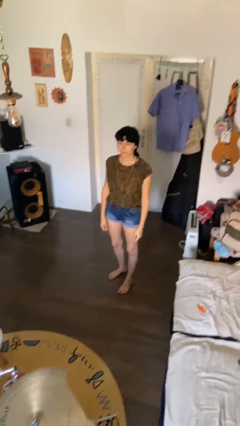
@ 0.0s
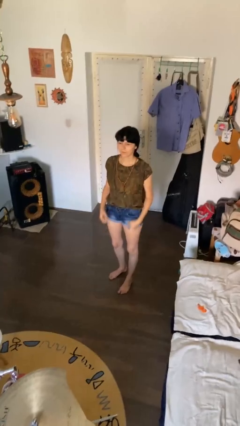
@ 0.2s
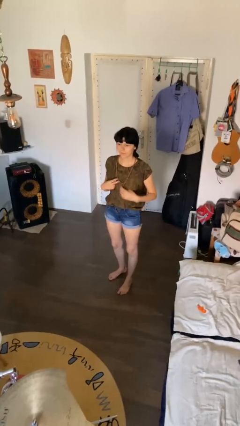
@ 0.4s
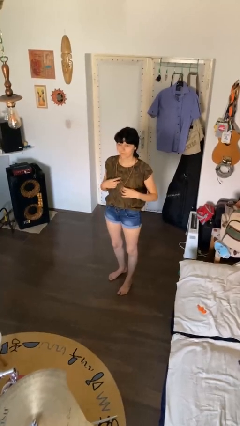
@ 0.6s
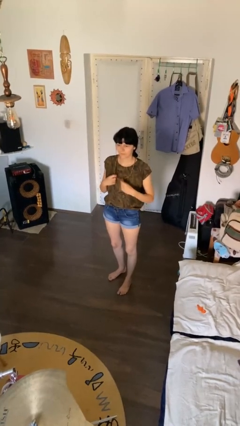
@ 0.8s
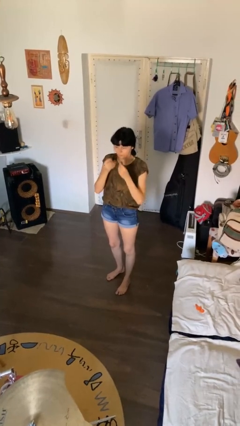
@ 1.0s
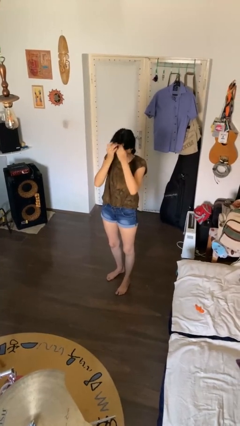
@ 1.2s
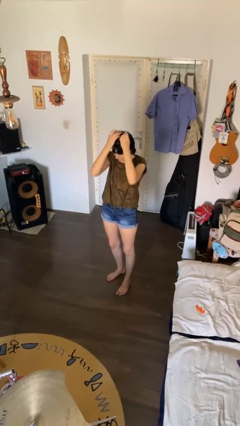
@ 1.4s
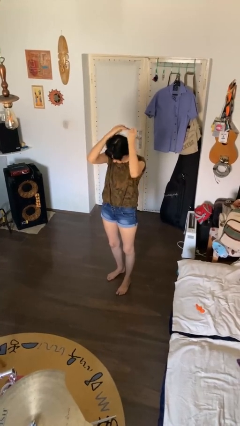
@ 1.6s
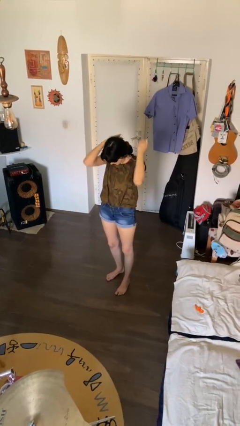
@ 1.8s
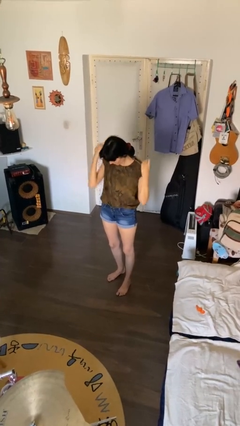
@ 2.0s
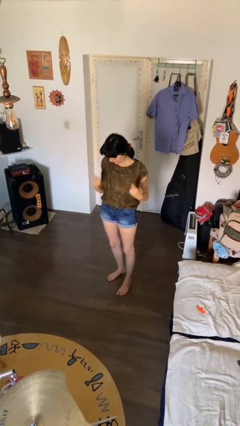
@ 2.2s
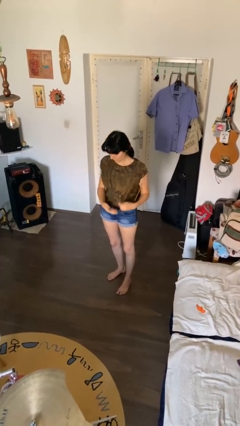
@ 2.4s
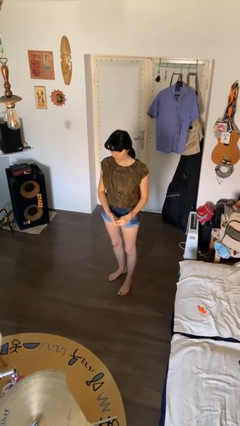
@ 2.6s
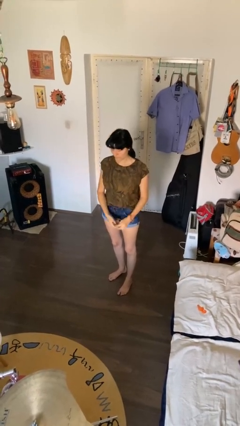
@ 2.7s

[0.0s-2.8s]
person takes off necklace

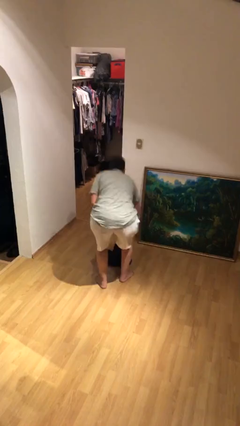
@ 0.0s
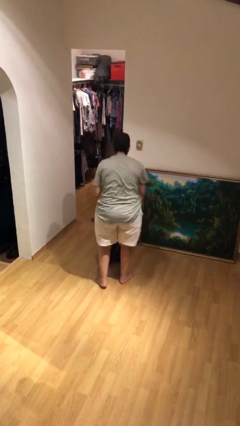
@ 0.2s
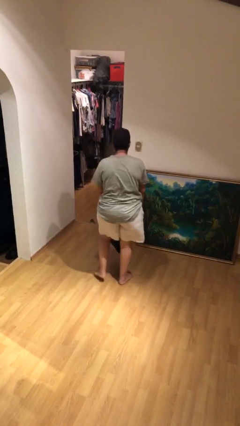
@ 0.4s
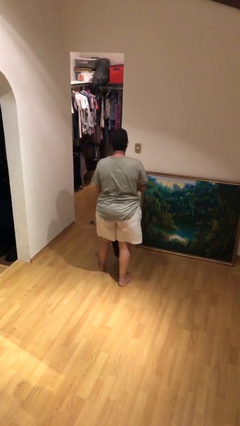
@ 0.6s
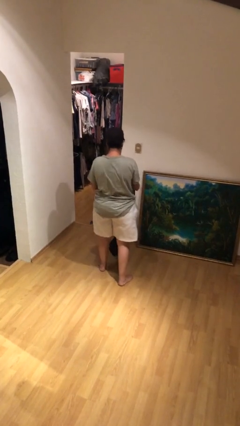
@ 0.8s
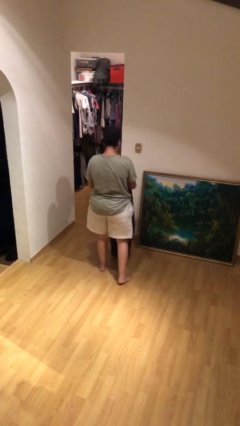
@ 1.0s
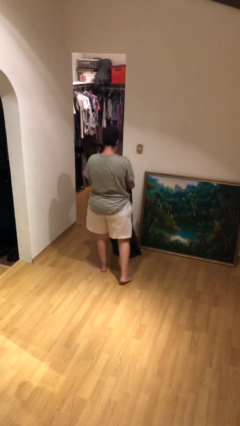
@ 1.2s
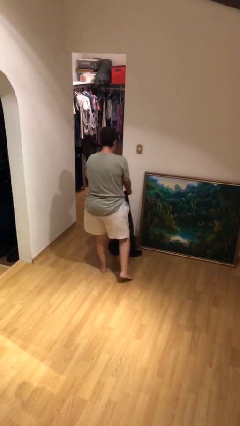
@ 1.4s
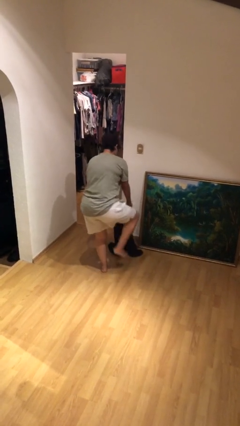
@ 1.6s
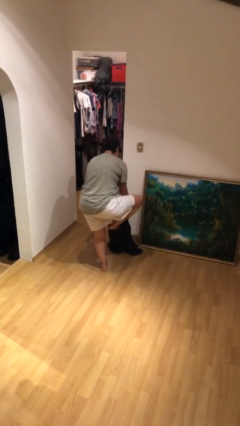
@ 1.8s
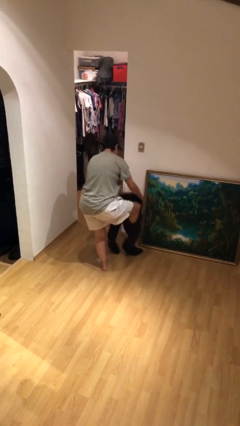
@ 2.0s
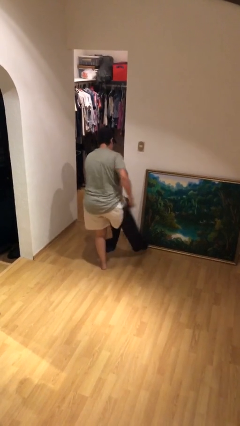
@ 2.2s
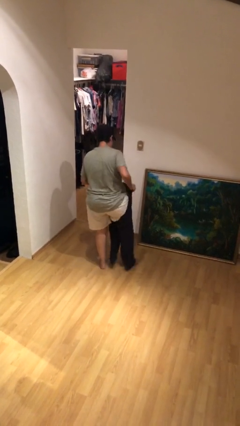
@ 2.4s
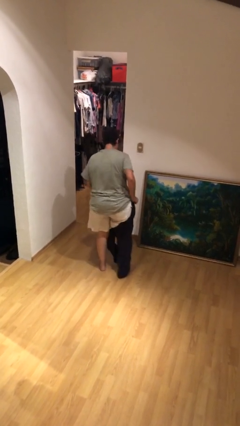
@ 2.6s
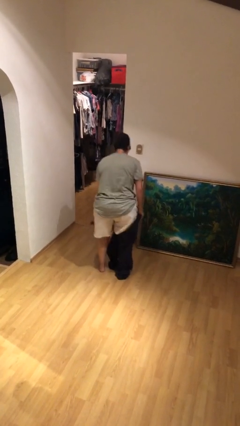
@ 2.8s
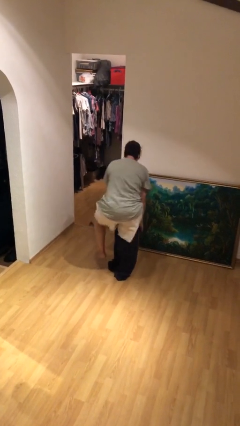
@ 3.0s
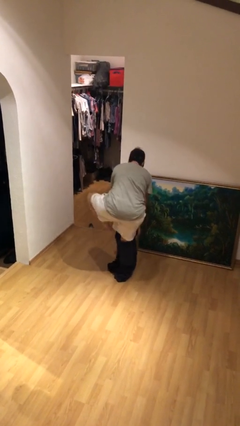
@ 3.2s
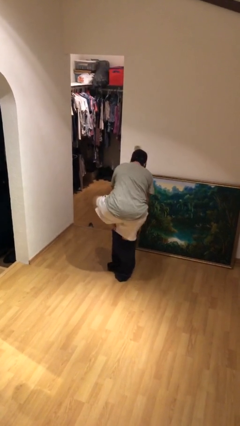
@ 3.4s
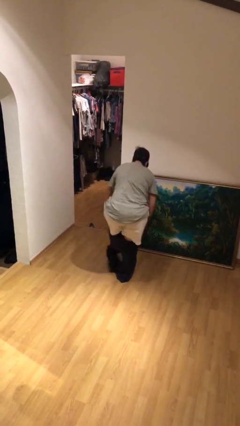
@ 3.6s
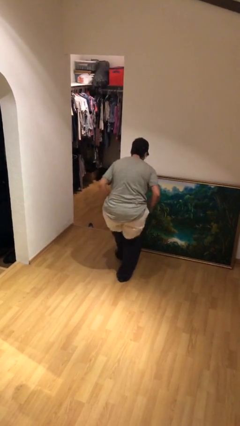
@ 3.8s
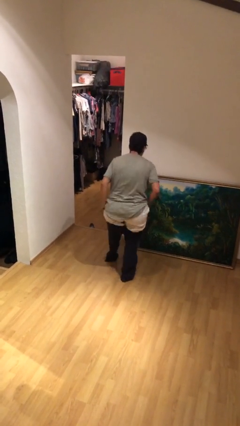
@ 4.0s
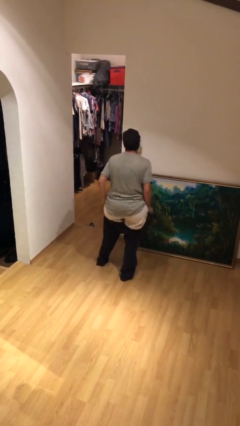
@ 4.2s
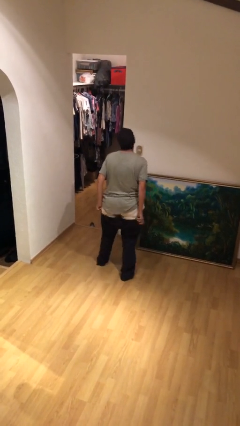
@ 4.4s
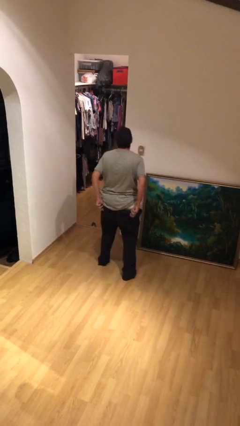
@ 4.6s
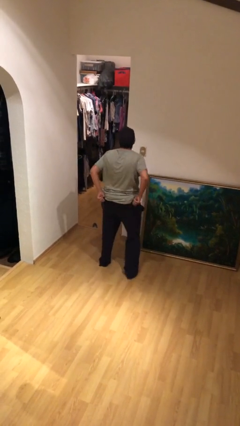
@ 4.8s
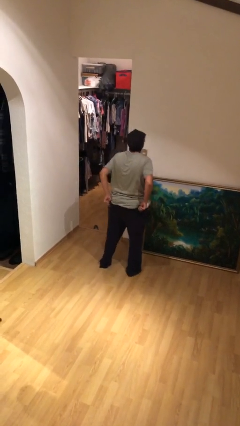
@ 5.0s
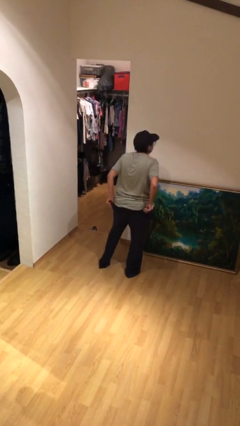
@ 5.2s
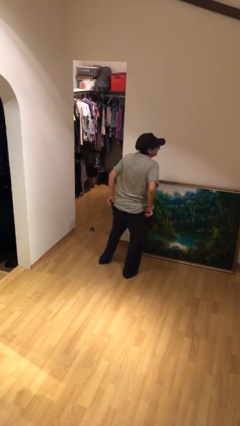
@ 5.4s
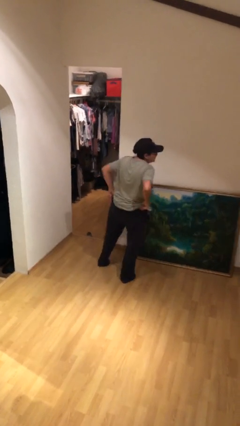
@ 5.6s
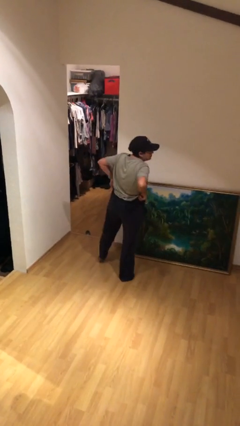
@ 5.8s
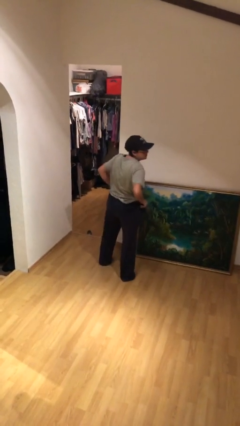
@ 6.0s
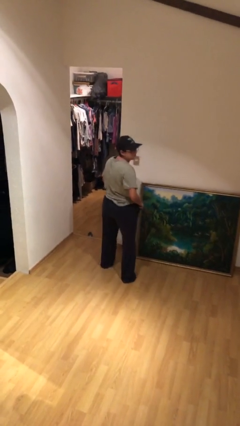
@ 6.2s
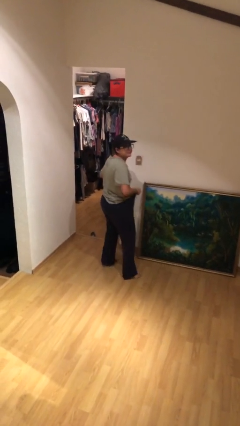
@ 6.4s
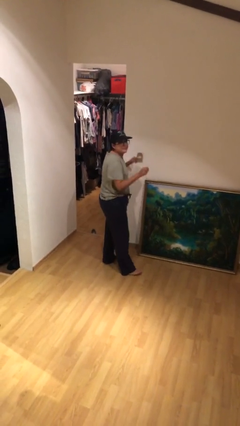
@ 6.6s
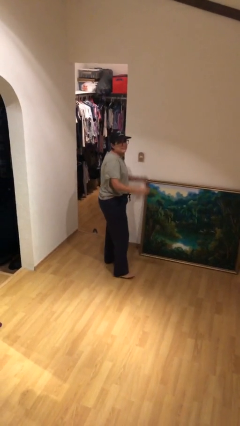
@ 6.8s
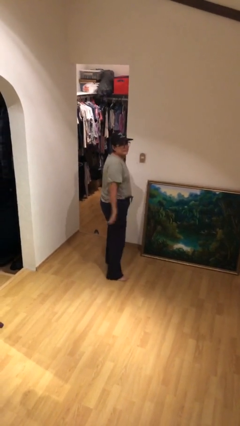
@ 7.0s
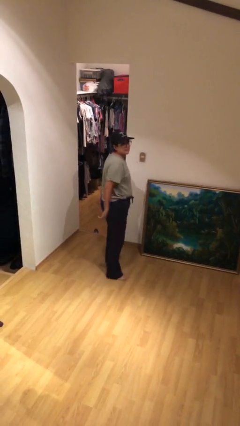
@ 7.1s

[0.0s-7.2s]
person puts on pants

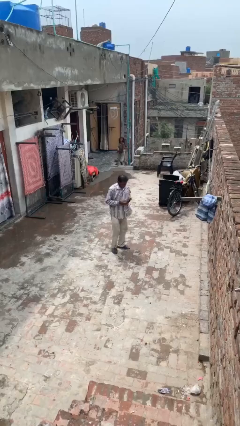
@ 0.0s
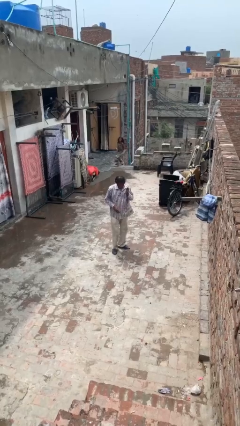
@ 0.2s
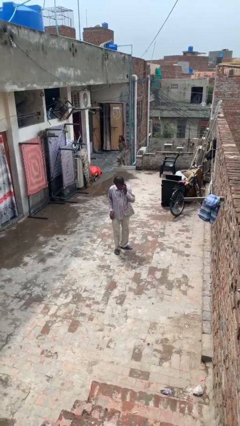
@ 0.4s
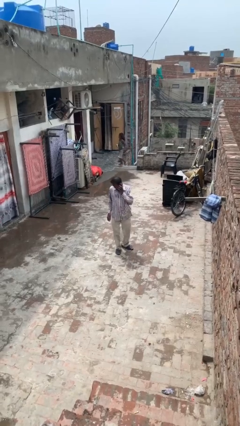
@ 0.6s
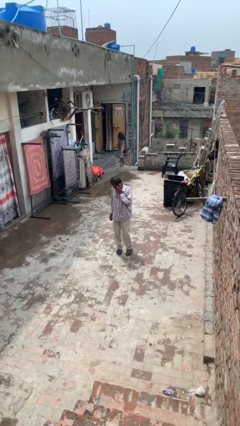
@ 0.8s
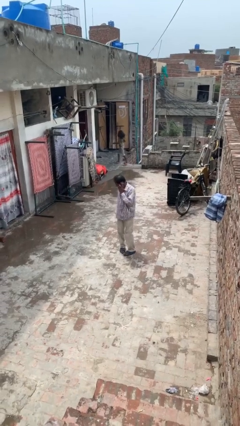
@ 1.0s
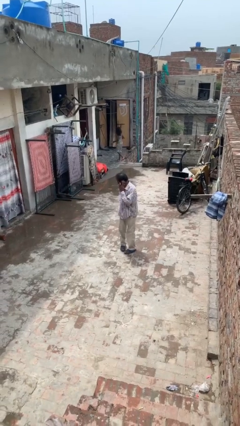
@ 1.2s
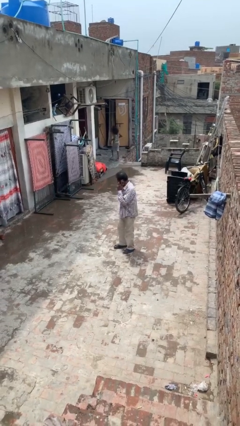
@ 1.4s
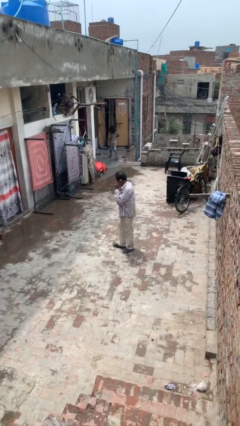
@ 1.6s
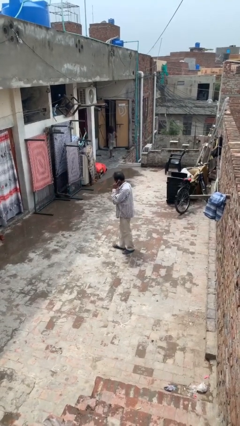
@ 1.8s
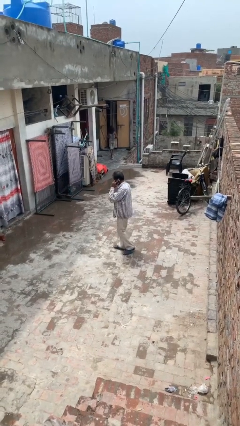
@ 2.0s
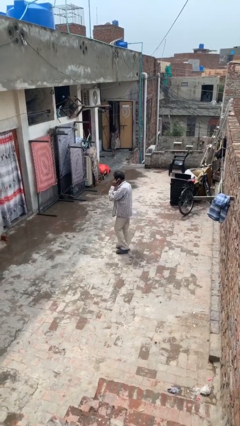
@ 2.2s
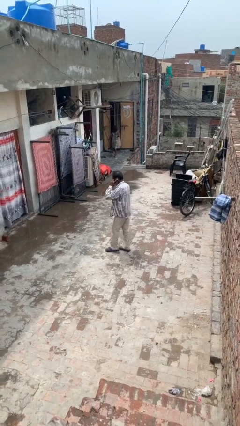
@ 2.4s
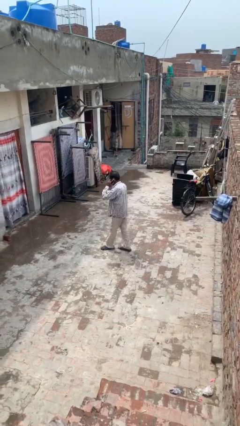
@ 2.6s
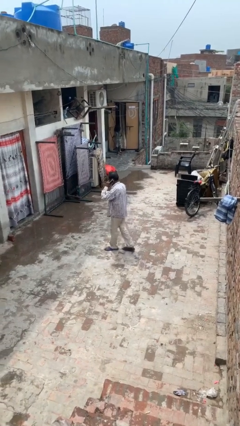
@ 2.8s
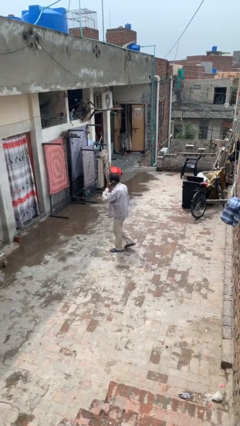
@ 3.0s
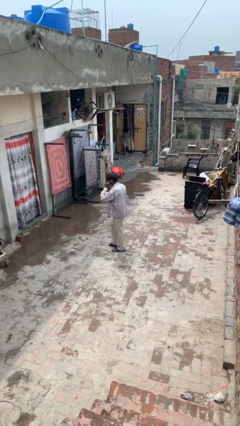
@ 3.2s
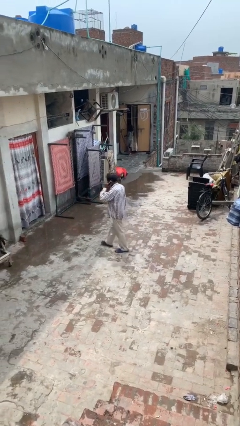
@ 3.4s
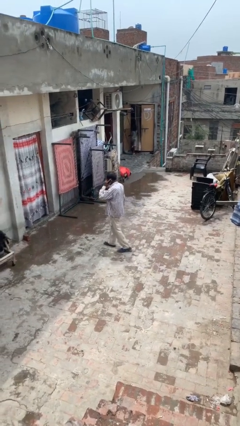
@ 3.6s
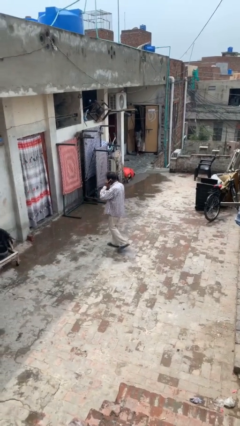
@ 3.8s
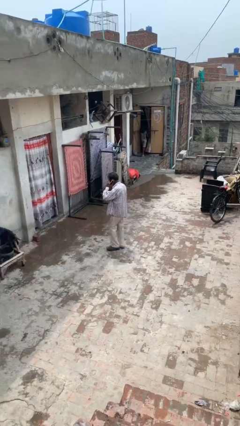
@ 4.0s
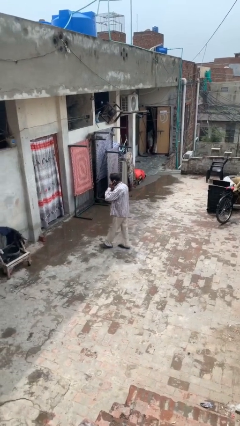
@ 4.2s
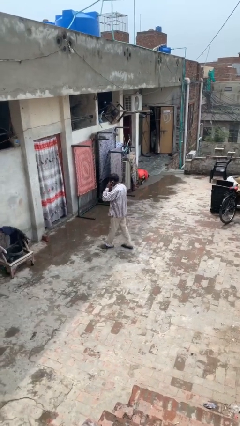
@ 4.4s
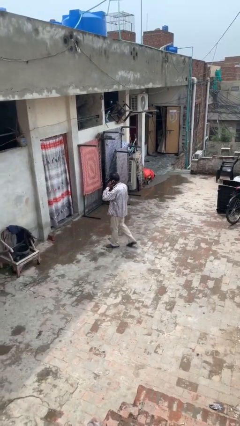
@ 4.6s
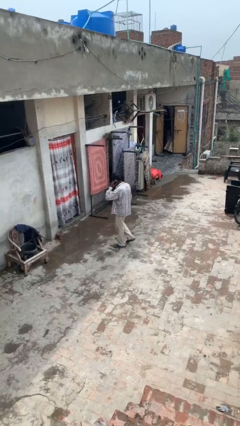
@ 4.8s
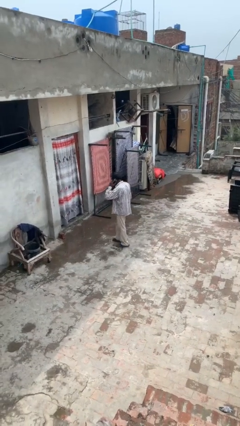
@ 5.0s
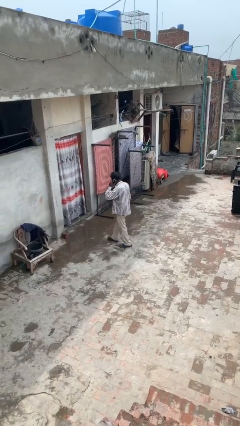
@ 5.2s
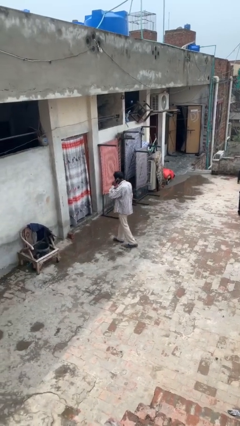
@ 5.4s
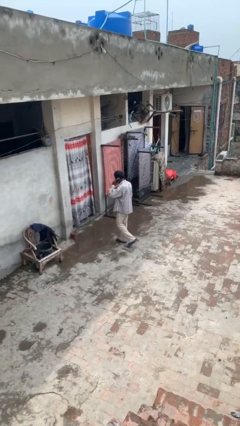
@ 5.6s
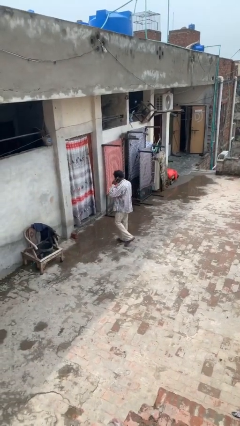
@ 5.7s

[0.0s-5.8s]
person talks on phone

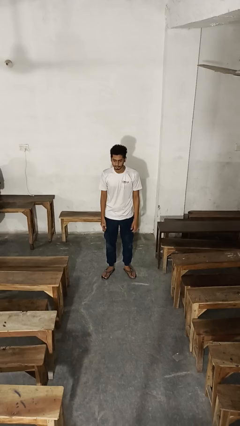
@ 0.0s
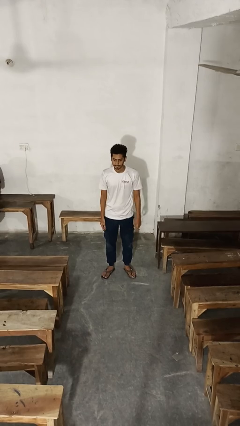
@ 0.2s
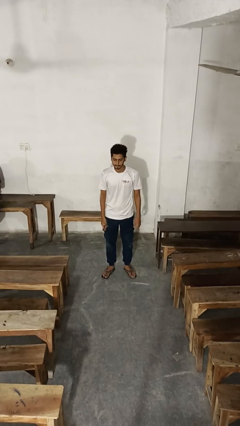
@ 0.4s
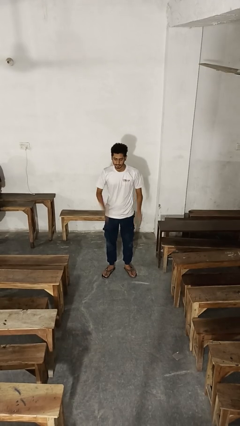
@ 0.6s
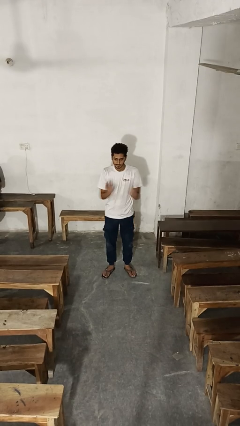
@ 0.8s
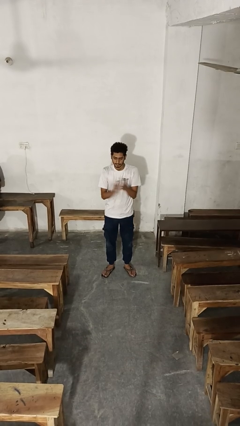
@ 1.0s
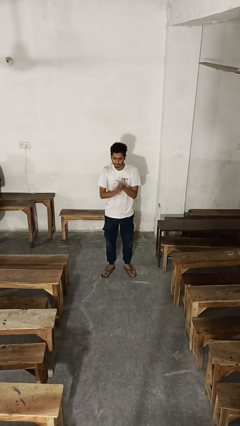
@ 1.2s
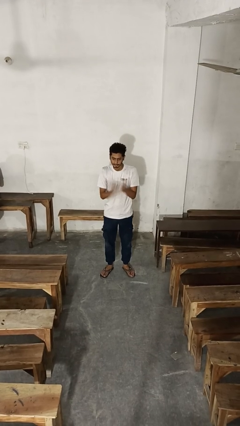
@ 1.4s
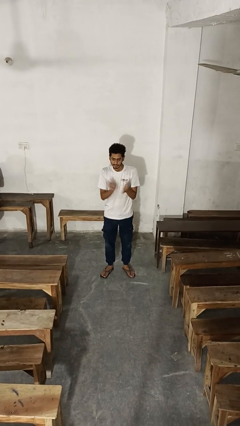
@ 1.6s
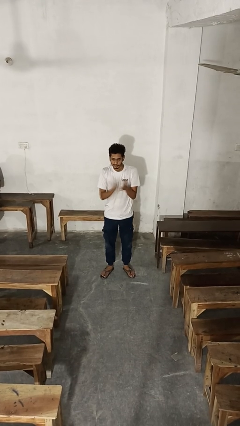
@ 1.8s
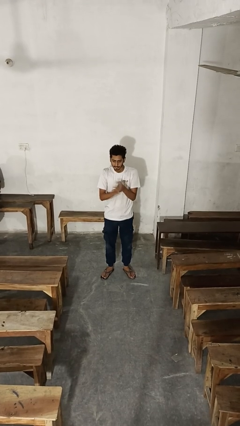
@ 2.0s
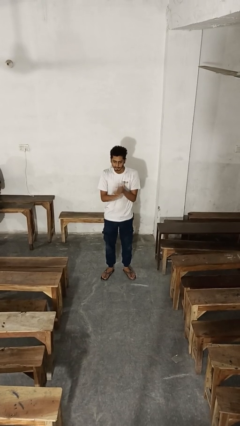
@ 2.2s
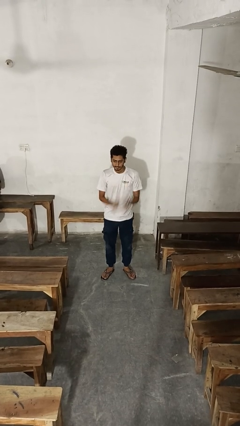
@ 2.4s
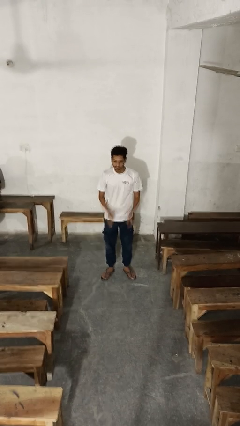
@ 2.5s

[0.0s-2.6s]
person claps hands
